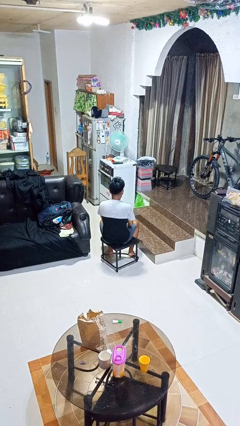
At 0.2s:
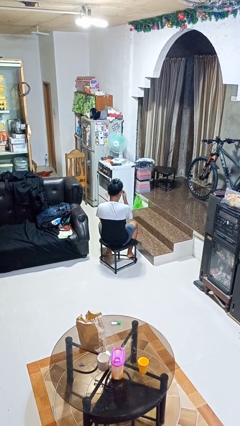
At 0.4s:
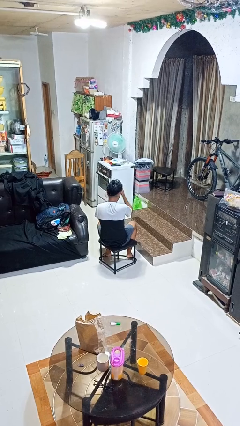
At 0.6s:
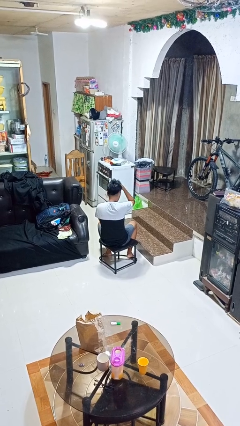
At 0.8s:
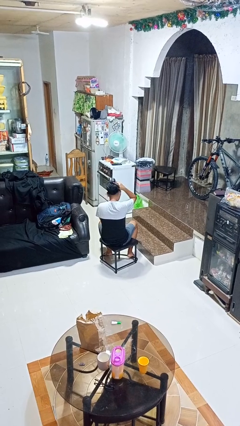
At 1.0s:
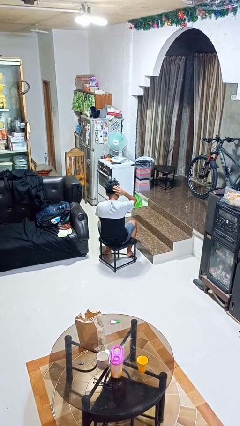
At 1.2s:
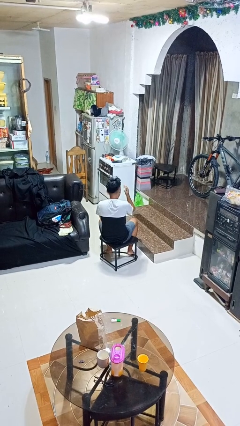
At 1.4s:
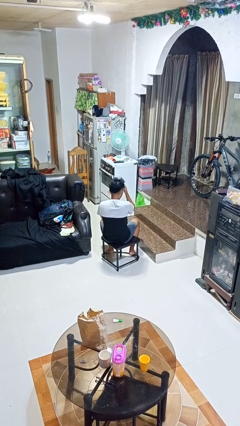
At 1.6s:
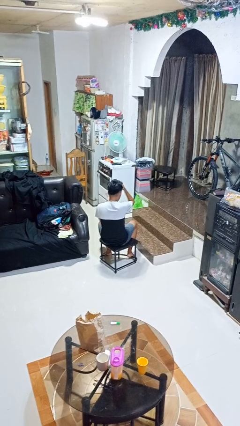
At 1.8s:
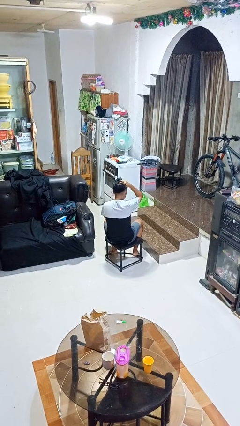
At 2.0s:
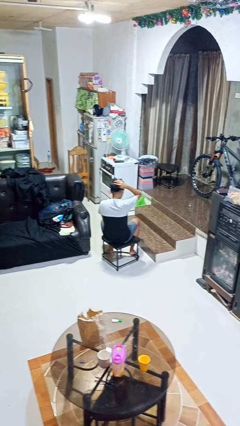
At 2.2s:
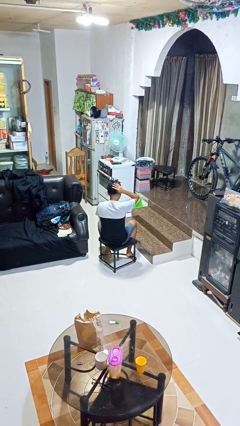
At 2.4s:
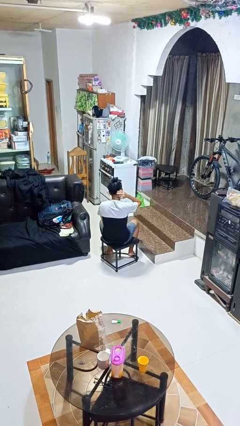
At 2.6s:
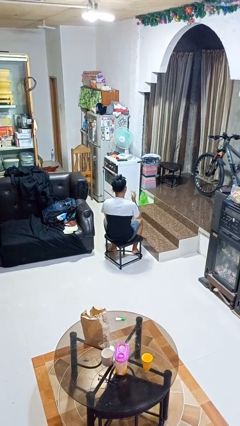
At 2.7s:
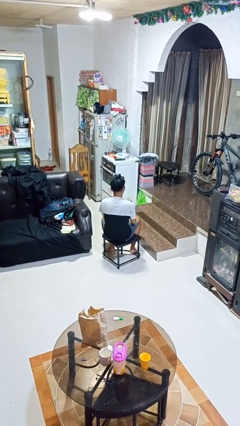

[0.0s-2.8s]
person strokes hair

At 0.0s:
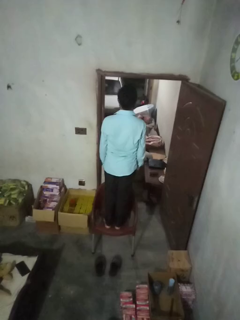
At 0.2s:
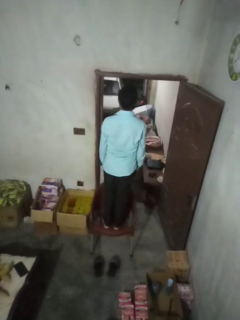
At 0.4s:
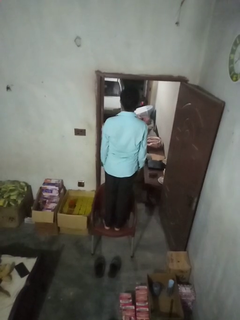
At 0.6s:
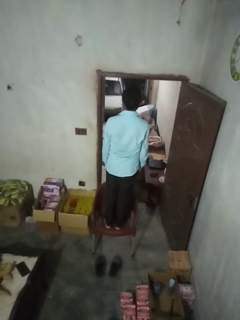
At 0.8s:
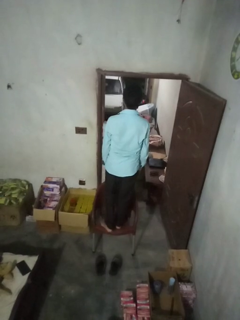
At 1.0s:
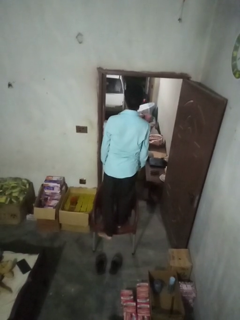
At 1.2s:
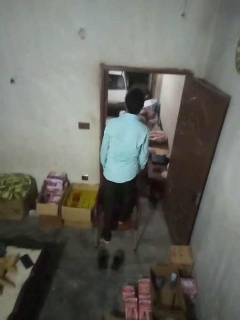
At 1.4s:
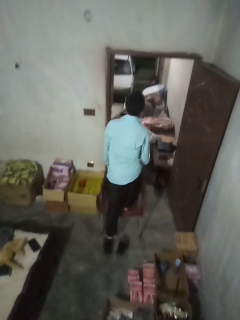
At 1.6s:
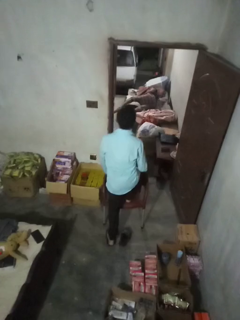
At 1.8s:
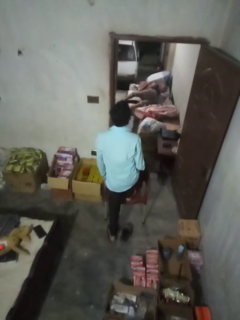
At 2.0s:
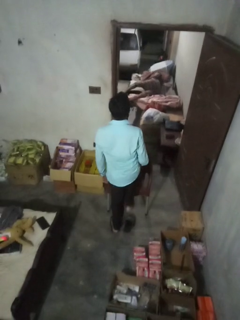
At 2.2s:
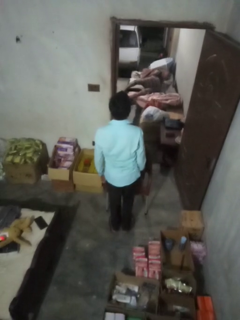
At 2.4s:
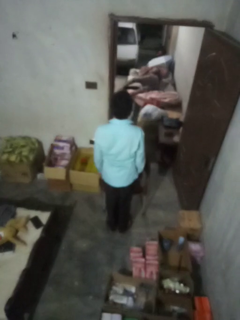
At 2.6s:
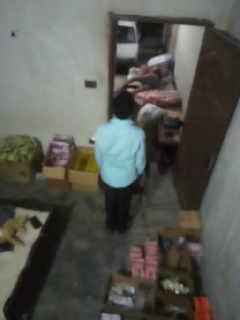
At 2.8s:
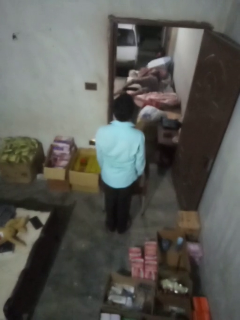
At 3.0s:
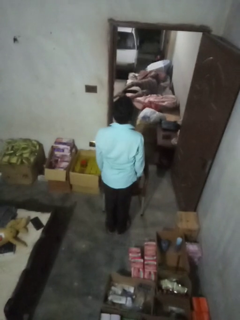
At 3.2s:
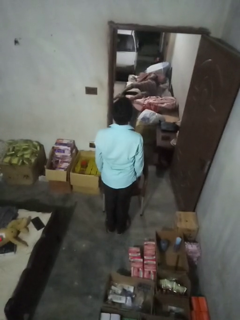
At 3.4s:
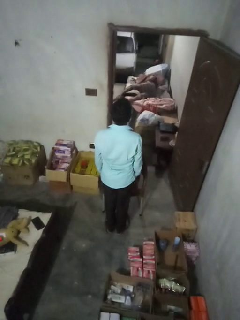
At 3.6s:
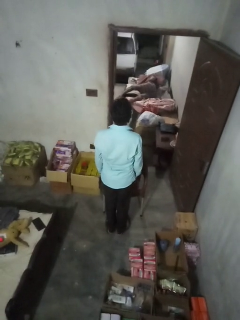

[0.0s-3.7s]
person climbs off chair

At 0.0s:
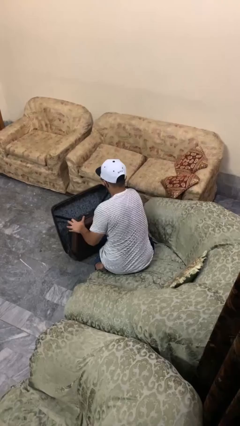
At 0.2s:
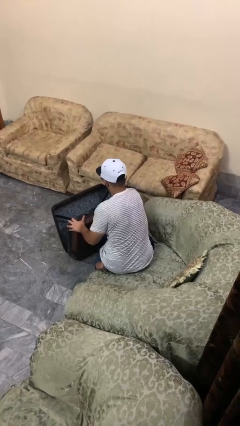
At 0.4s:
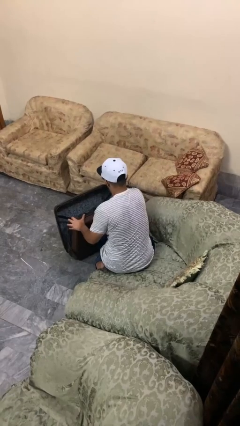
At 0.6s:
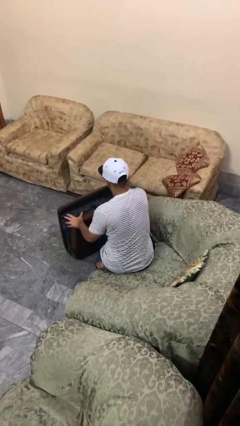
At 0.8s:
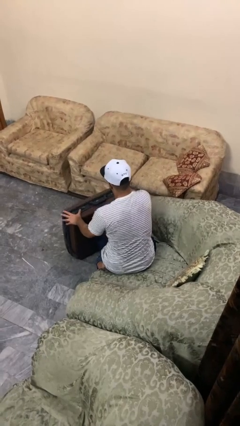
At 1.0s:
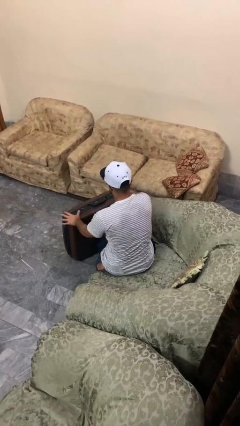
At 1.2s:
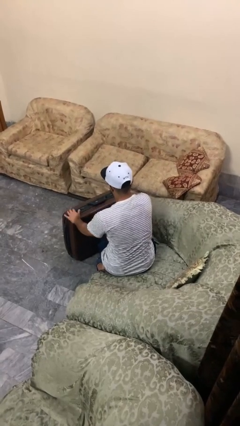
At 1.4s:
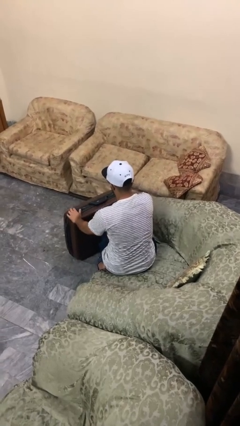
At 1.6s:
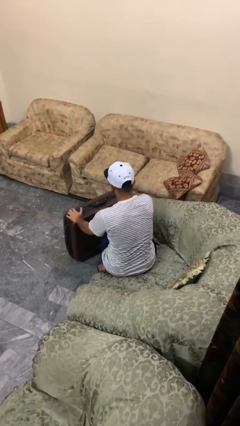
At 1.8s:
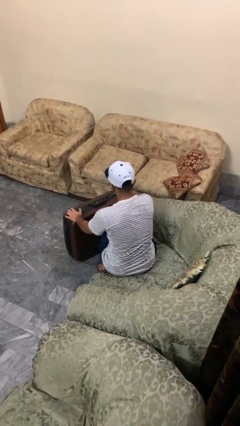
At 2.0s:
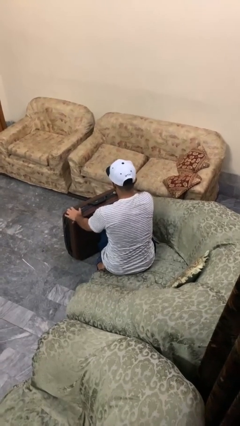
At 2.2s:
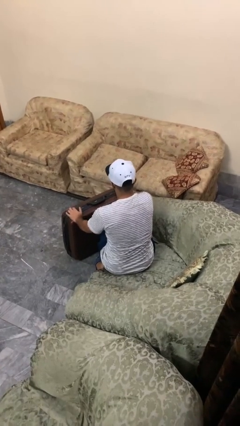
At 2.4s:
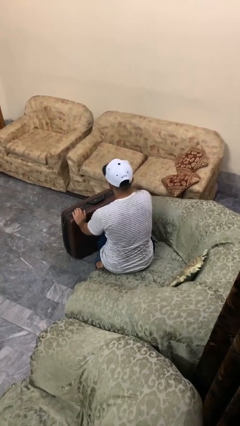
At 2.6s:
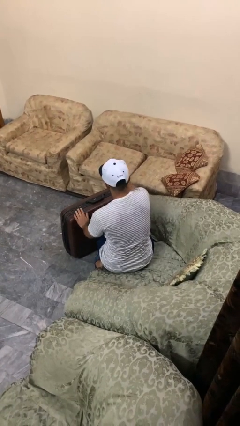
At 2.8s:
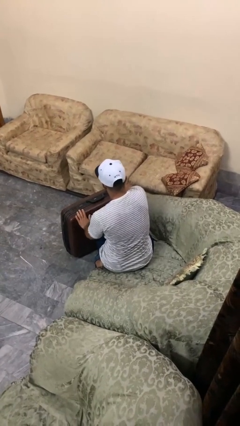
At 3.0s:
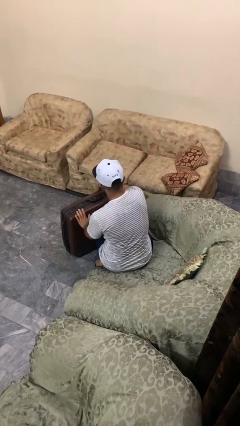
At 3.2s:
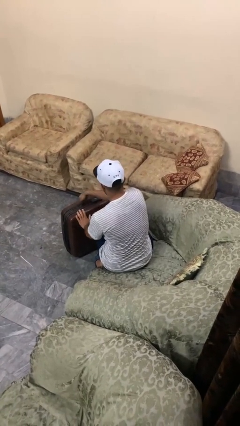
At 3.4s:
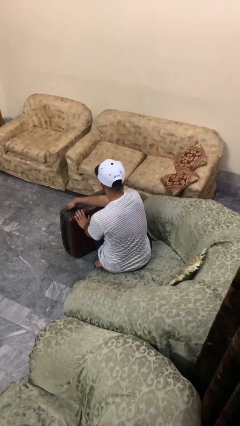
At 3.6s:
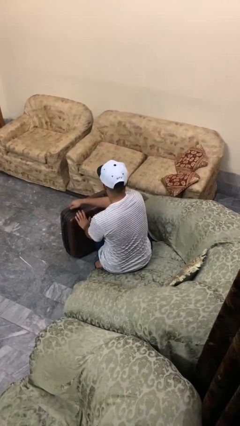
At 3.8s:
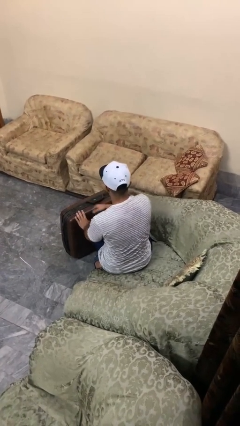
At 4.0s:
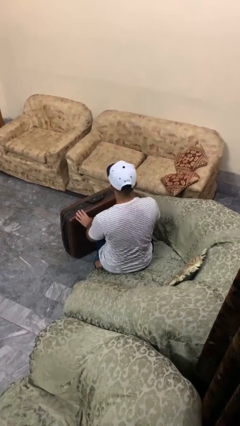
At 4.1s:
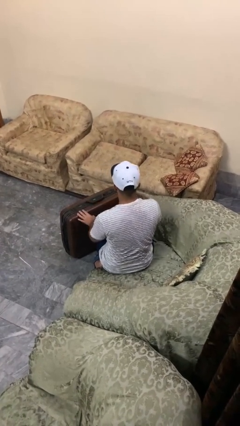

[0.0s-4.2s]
person closes suitcase

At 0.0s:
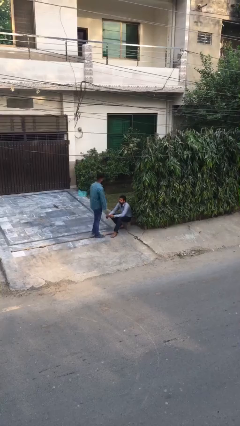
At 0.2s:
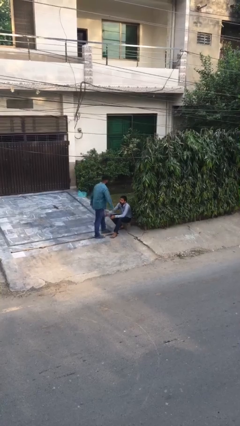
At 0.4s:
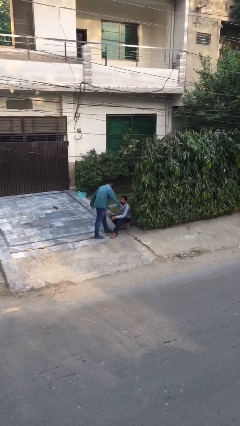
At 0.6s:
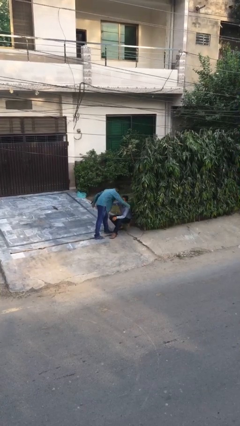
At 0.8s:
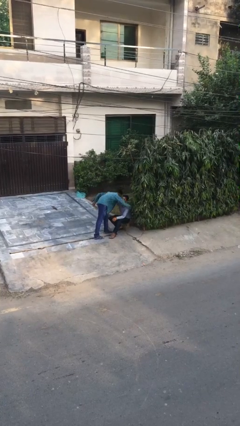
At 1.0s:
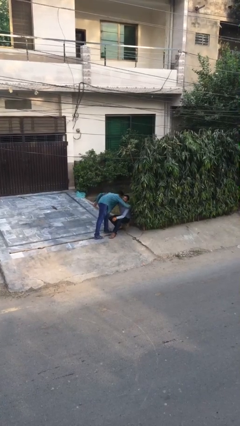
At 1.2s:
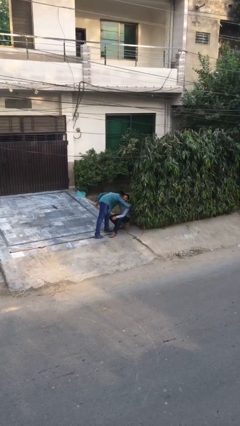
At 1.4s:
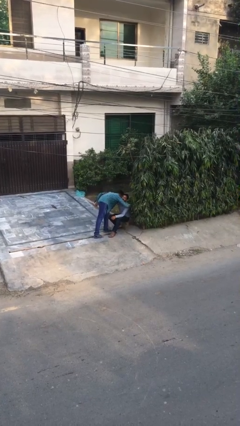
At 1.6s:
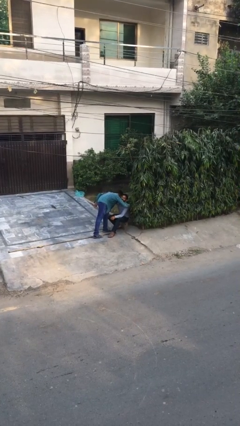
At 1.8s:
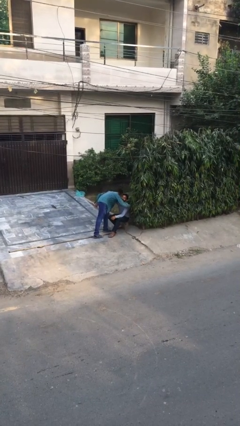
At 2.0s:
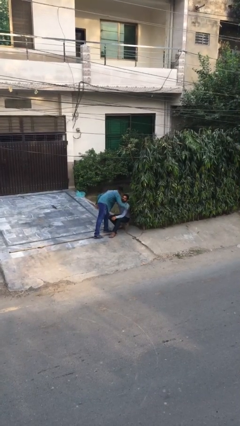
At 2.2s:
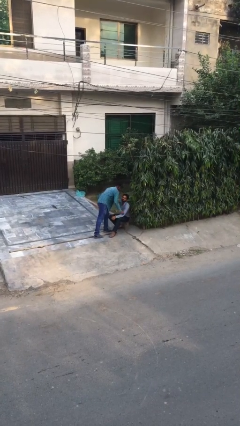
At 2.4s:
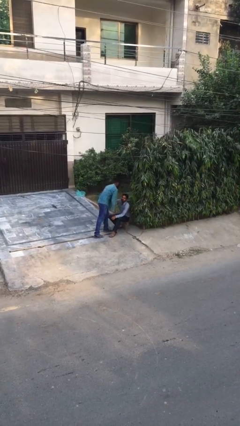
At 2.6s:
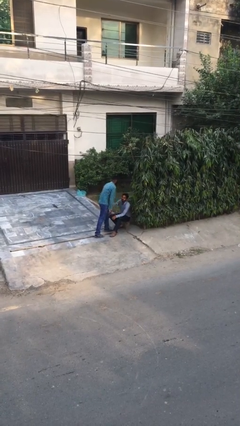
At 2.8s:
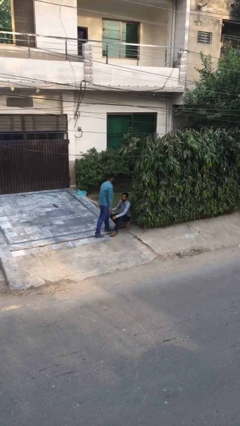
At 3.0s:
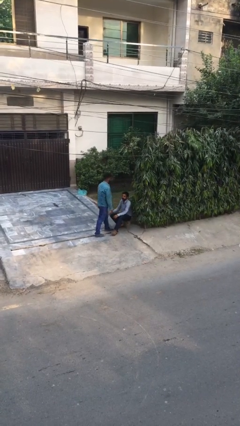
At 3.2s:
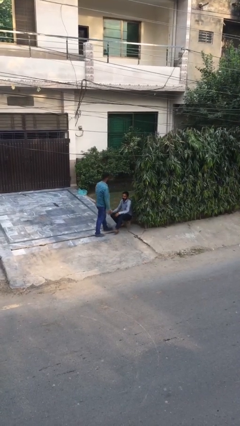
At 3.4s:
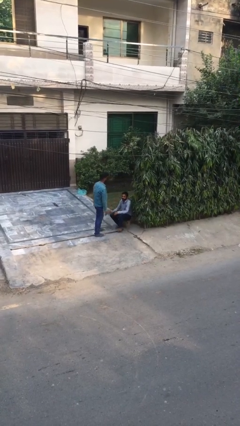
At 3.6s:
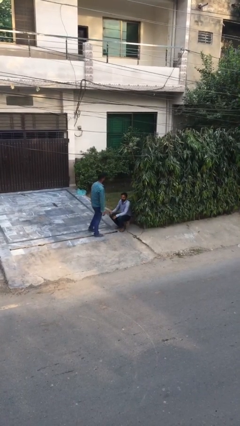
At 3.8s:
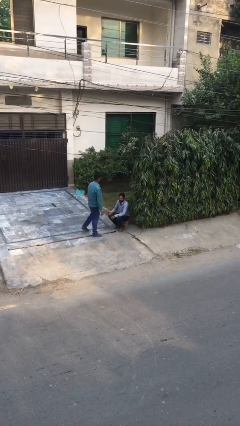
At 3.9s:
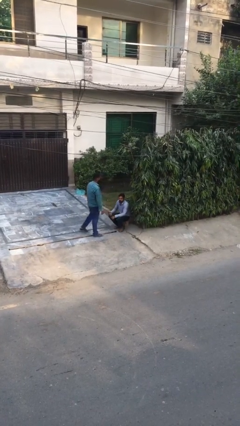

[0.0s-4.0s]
person embraces person

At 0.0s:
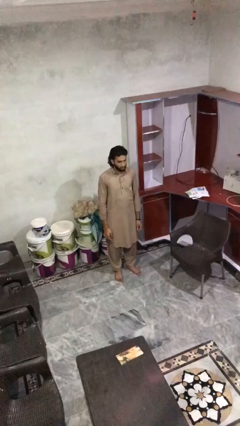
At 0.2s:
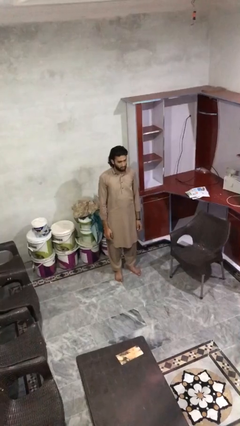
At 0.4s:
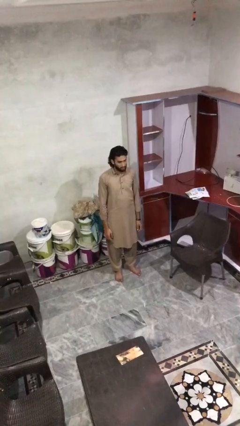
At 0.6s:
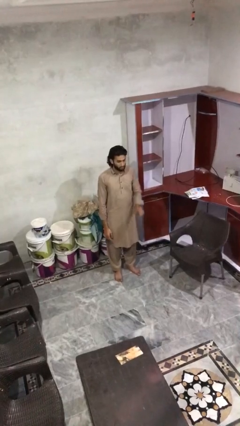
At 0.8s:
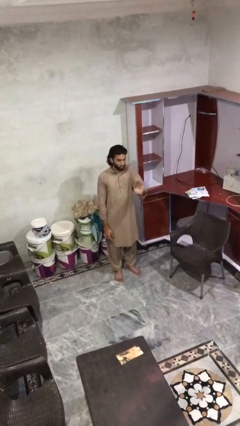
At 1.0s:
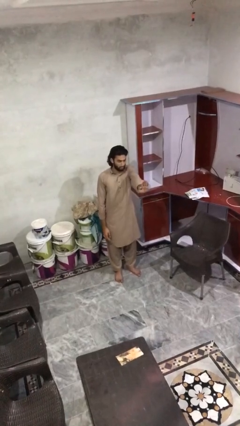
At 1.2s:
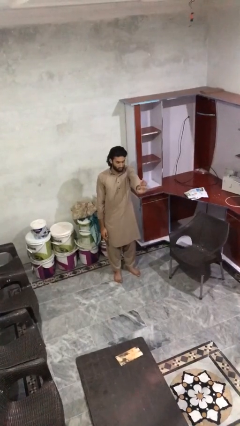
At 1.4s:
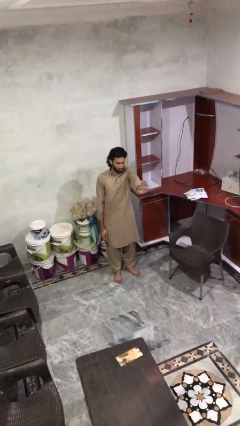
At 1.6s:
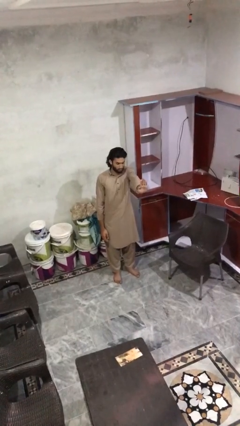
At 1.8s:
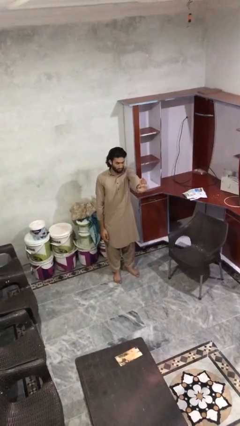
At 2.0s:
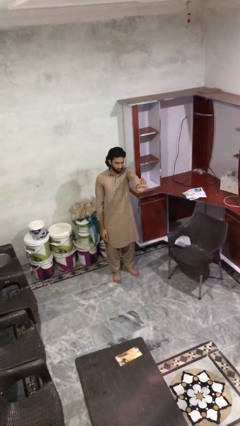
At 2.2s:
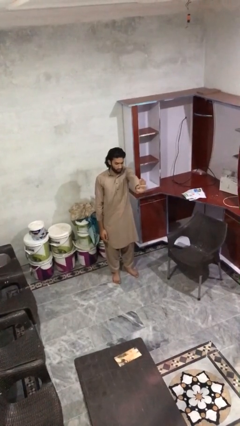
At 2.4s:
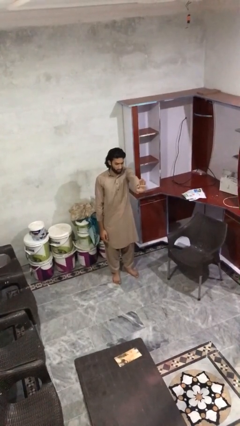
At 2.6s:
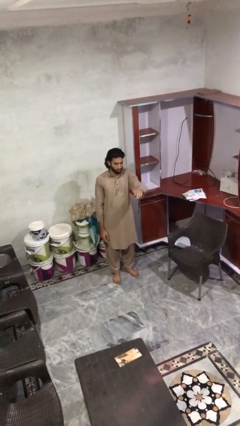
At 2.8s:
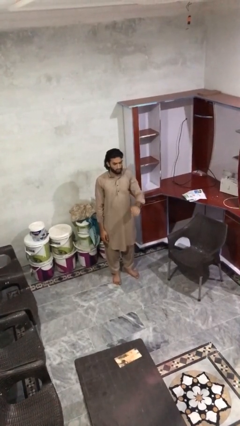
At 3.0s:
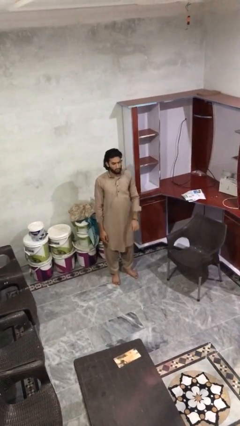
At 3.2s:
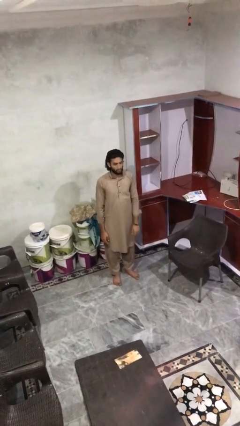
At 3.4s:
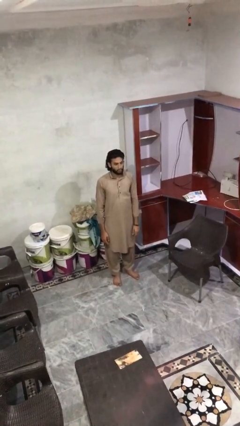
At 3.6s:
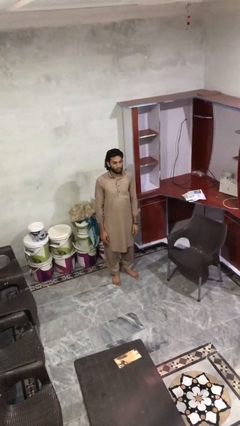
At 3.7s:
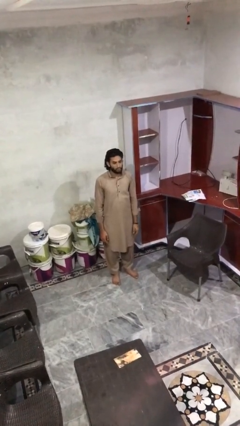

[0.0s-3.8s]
person gestures stop
